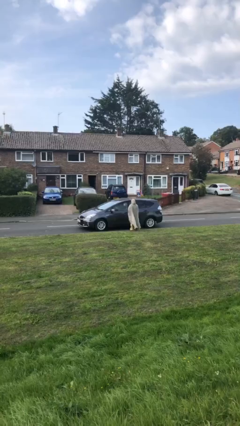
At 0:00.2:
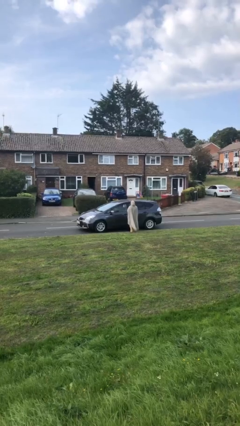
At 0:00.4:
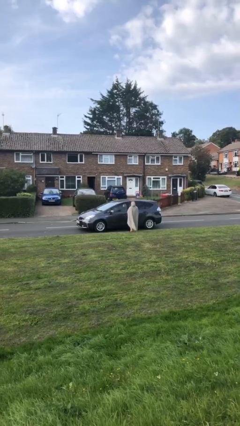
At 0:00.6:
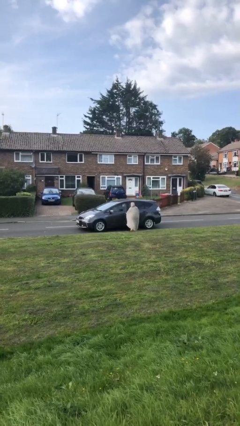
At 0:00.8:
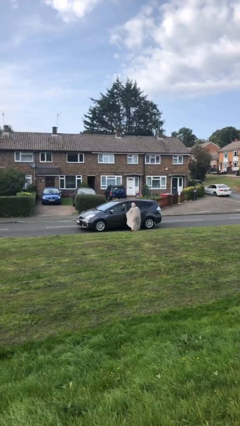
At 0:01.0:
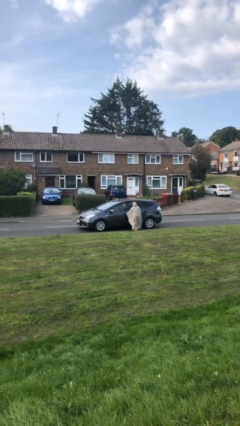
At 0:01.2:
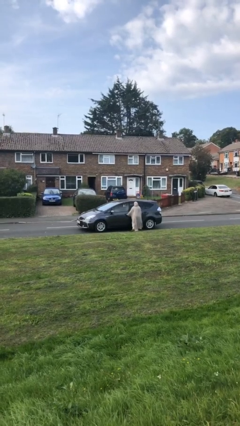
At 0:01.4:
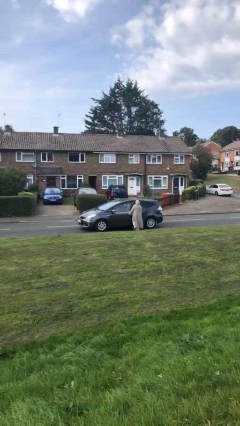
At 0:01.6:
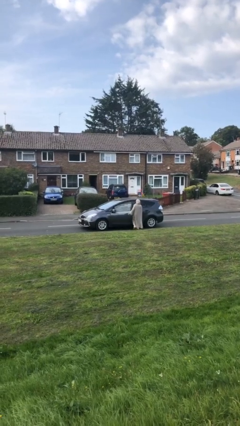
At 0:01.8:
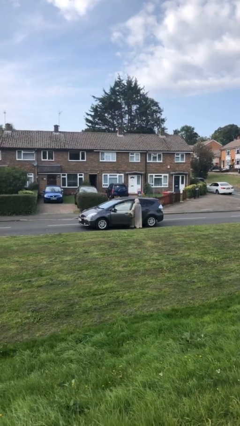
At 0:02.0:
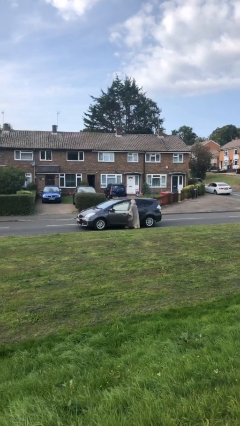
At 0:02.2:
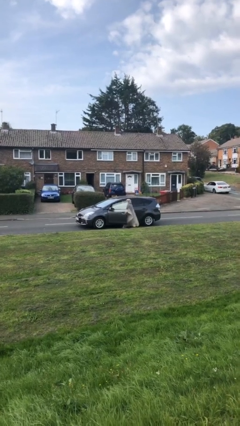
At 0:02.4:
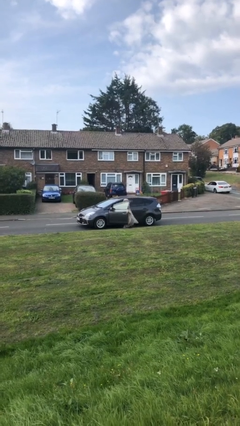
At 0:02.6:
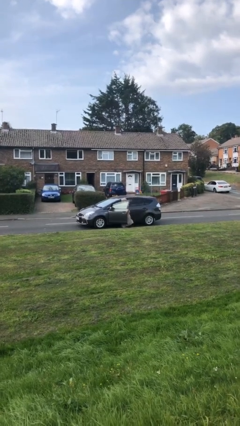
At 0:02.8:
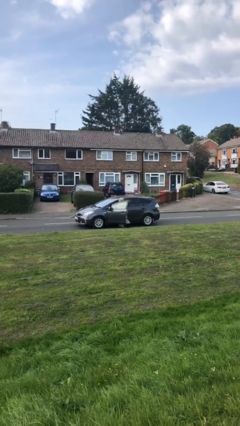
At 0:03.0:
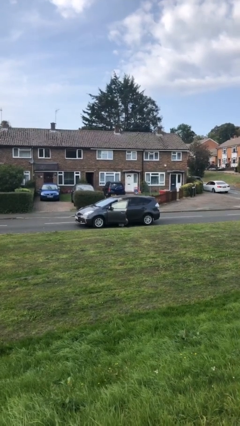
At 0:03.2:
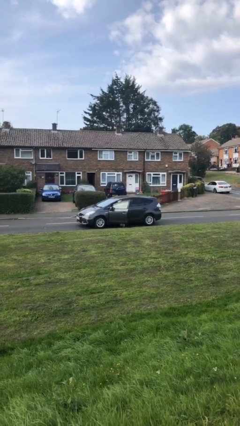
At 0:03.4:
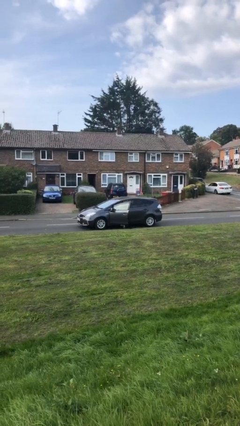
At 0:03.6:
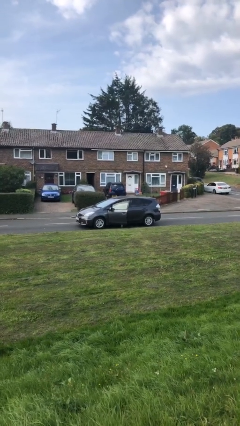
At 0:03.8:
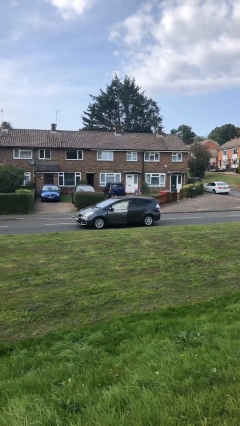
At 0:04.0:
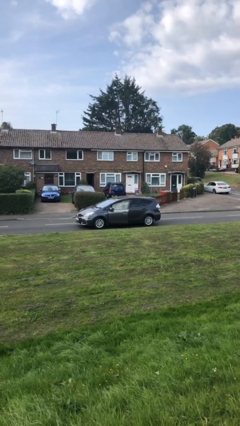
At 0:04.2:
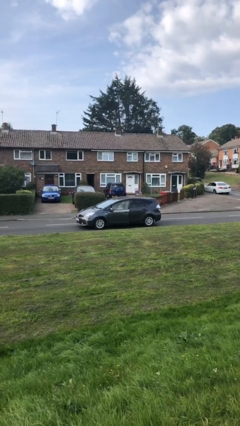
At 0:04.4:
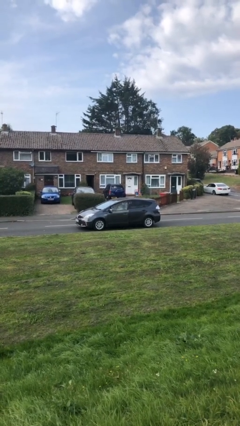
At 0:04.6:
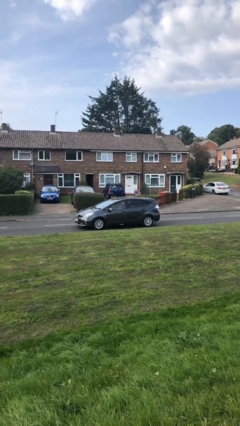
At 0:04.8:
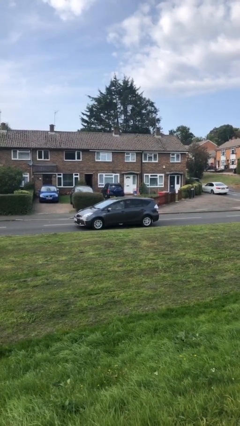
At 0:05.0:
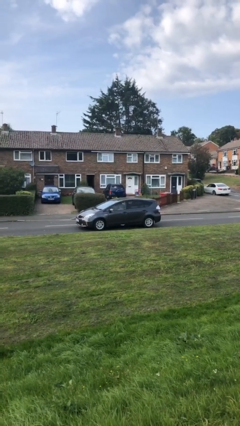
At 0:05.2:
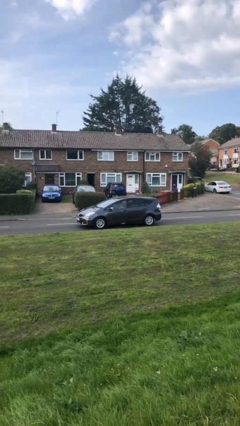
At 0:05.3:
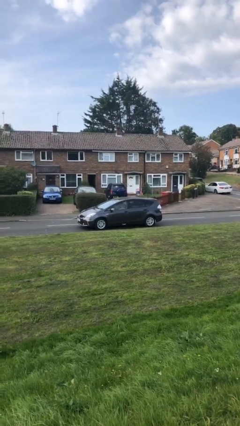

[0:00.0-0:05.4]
car picks up person

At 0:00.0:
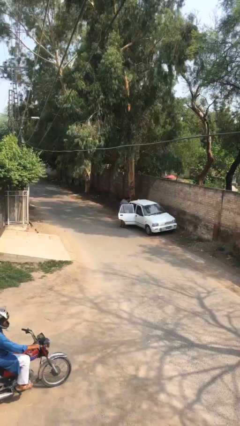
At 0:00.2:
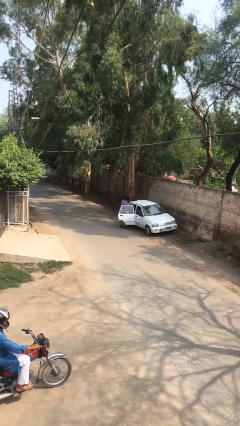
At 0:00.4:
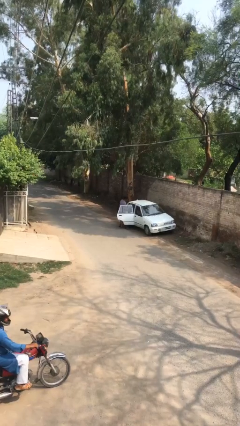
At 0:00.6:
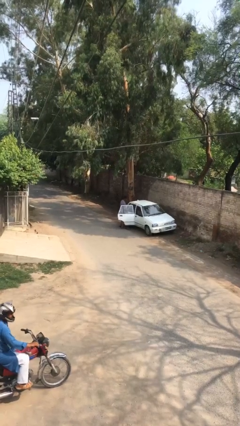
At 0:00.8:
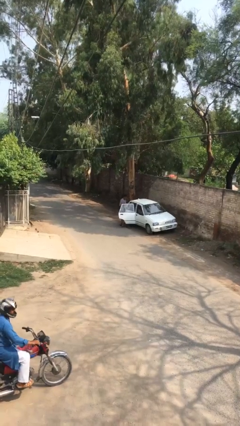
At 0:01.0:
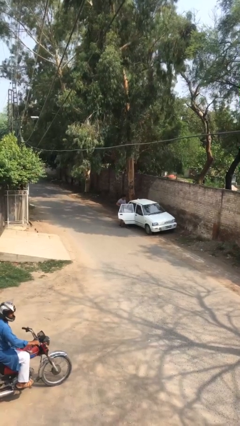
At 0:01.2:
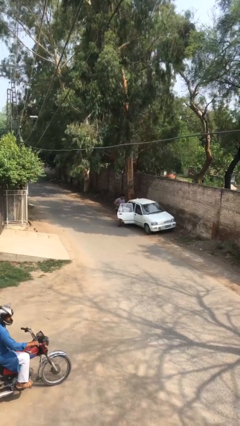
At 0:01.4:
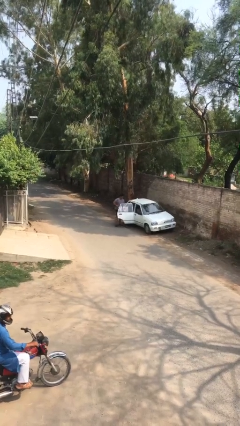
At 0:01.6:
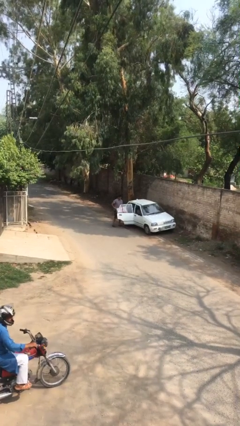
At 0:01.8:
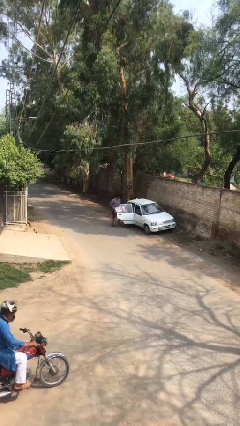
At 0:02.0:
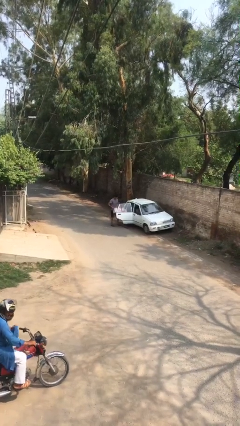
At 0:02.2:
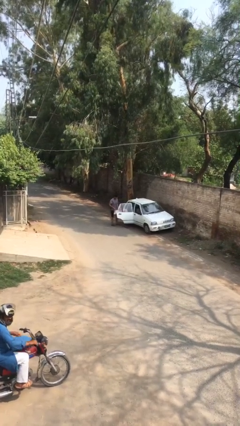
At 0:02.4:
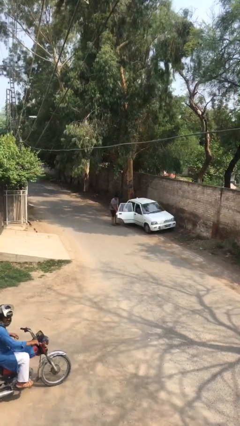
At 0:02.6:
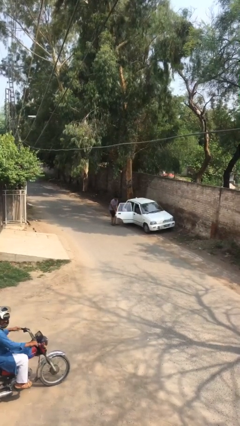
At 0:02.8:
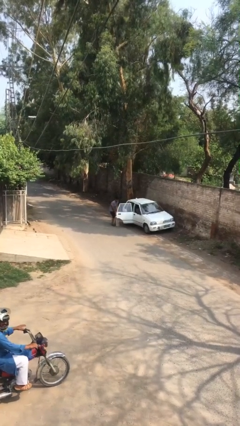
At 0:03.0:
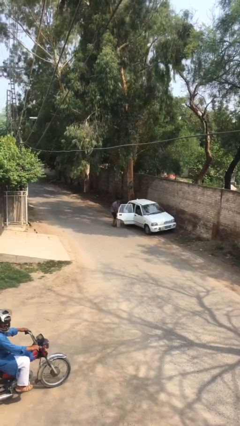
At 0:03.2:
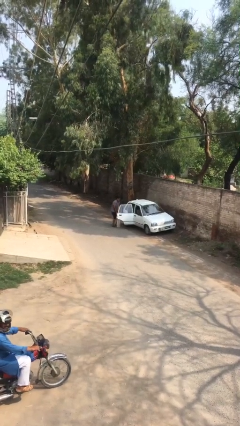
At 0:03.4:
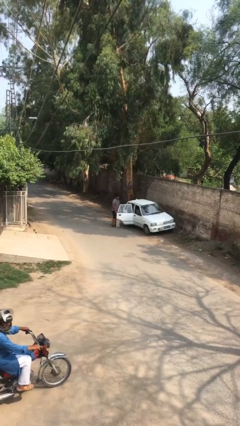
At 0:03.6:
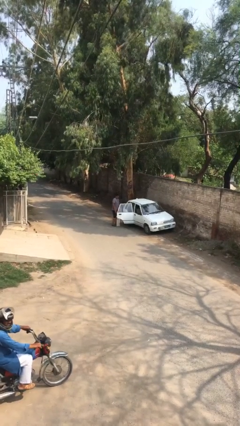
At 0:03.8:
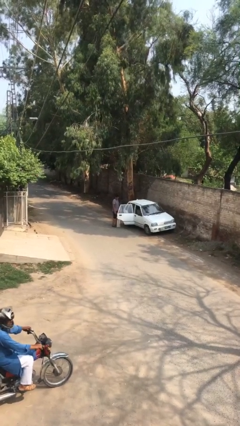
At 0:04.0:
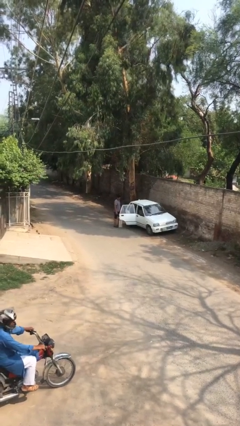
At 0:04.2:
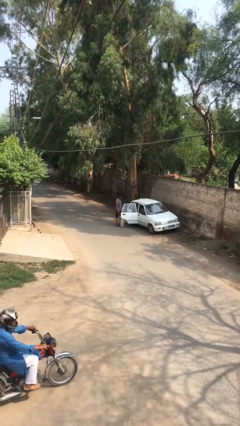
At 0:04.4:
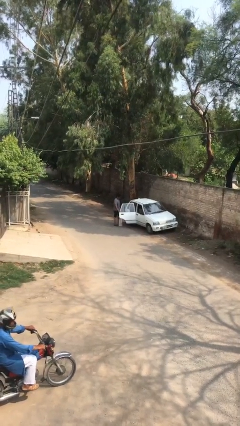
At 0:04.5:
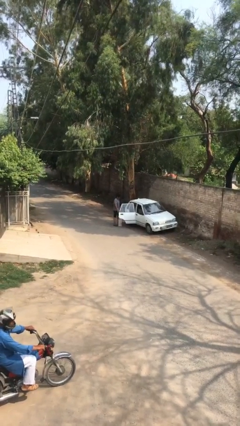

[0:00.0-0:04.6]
person unloads car

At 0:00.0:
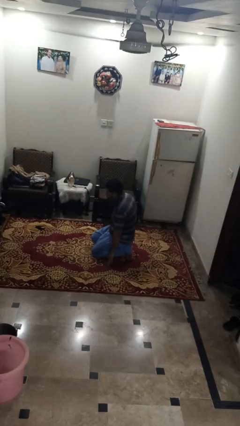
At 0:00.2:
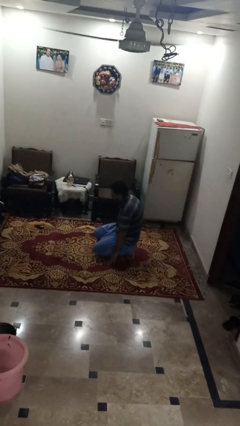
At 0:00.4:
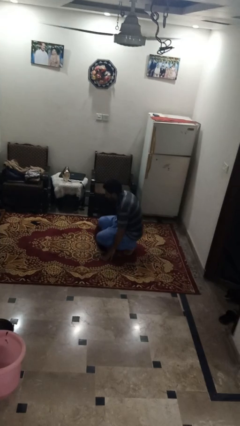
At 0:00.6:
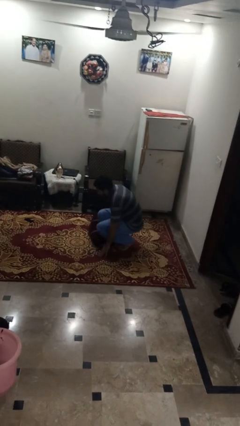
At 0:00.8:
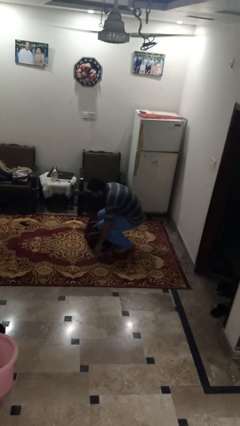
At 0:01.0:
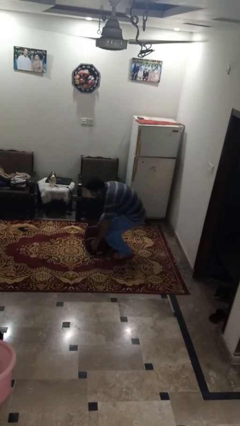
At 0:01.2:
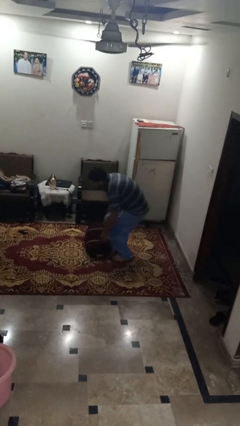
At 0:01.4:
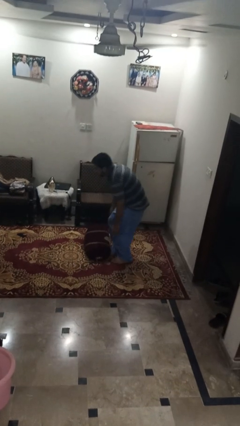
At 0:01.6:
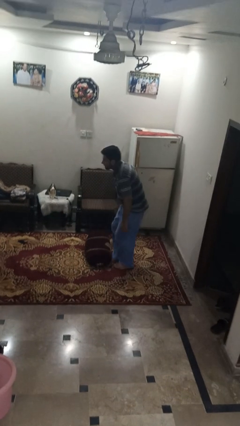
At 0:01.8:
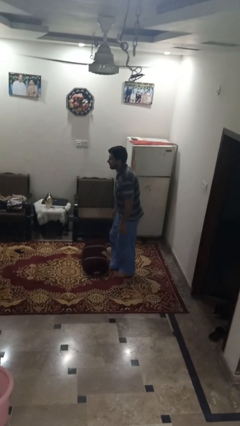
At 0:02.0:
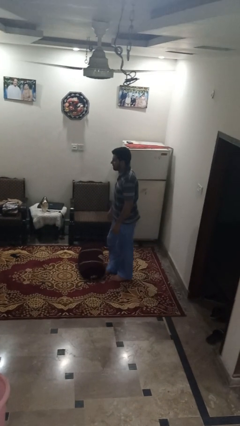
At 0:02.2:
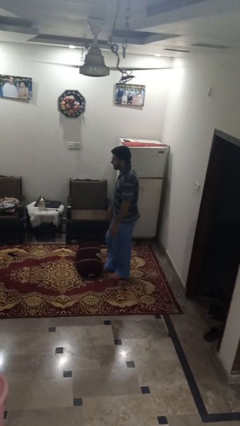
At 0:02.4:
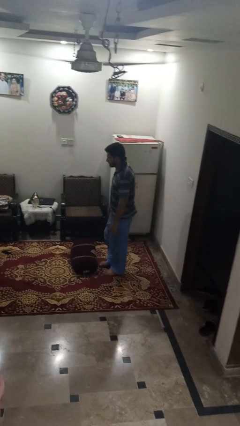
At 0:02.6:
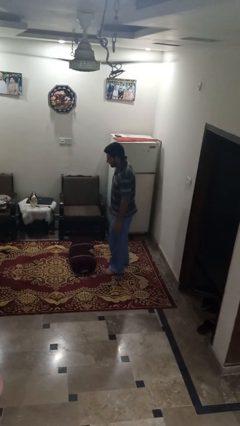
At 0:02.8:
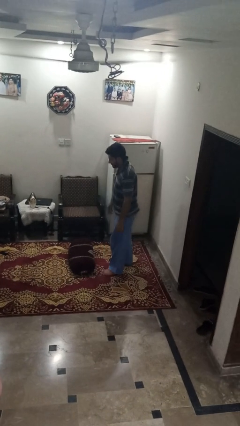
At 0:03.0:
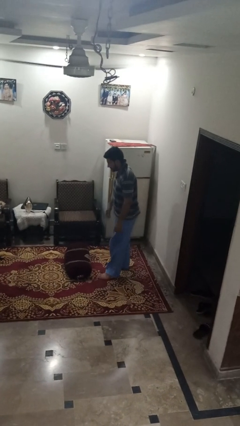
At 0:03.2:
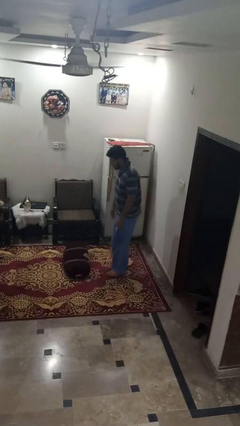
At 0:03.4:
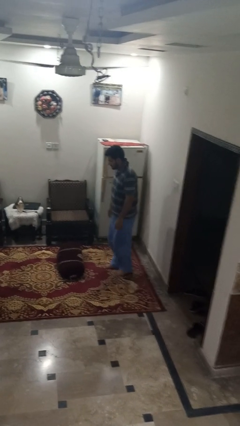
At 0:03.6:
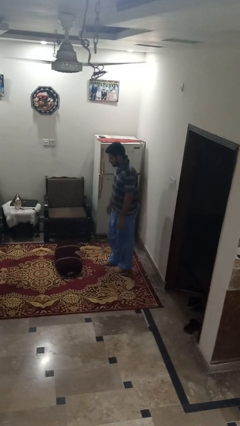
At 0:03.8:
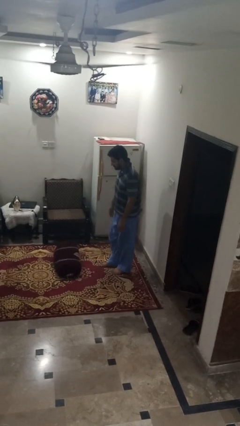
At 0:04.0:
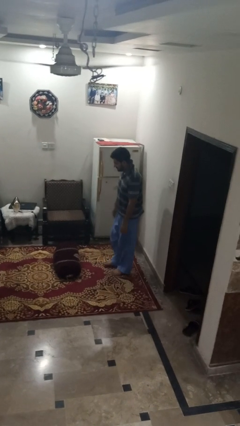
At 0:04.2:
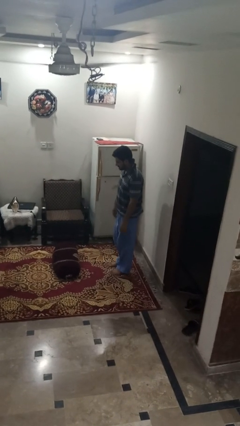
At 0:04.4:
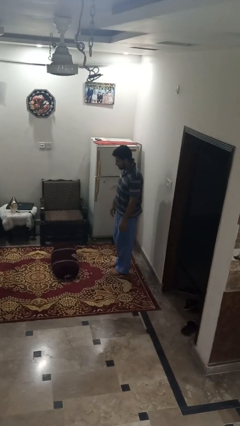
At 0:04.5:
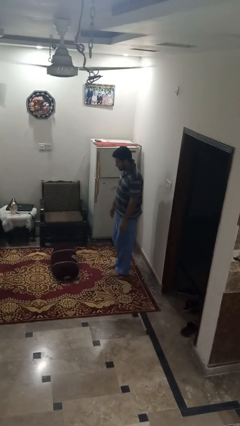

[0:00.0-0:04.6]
person stands up from floor

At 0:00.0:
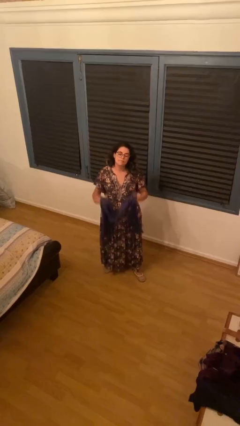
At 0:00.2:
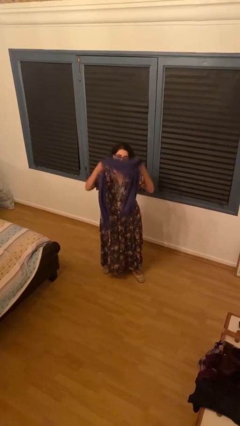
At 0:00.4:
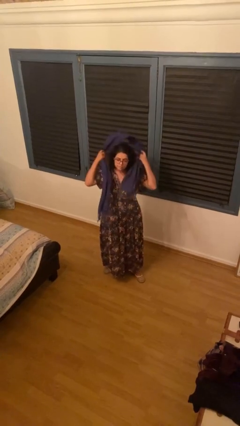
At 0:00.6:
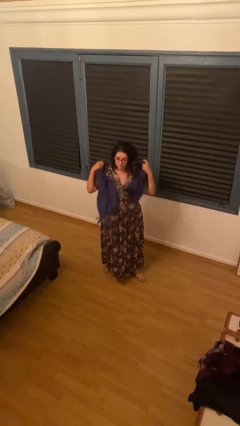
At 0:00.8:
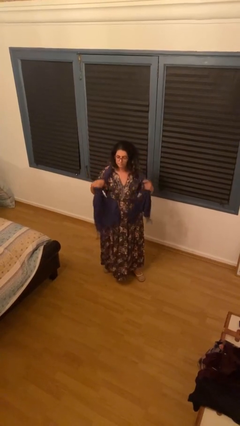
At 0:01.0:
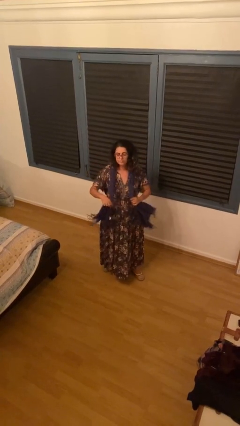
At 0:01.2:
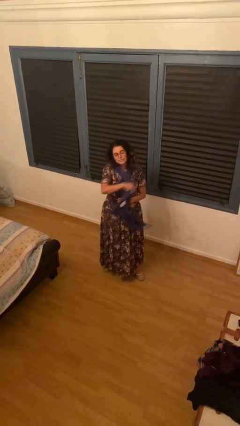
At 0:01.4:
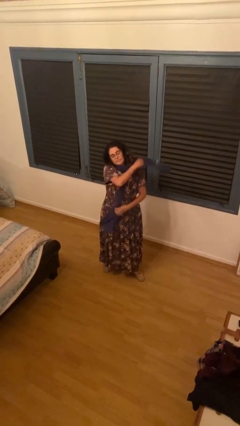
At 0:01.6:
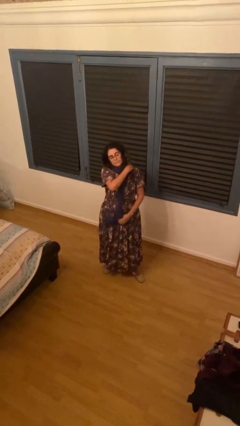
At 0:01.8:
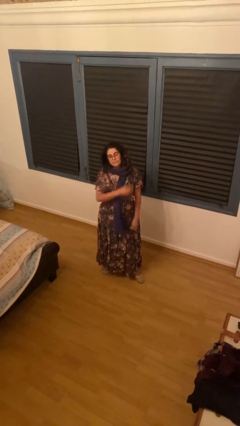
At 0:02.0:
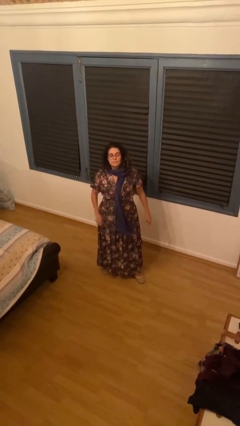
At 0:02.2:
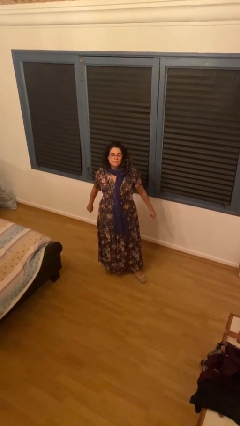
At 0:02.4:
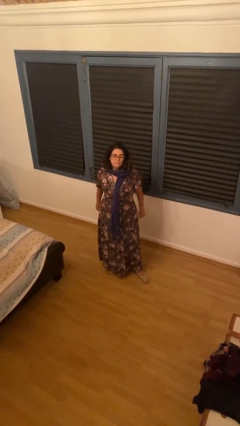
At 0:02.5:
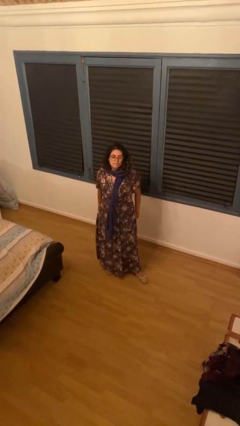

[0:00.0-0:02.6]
person puts on scarf

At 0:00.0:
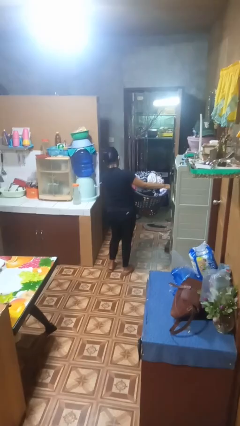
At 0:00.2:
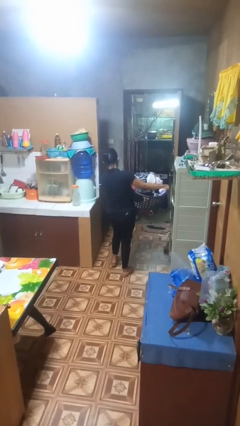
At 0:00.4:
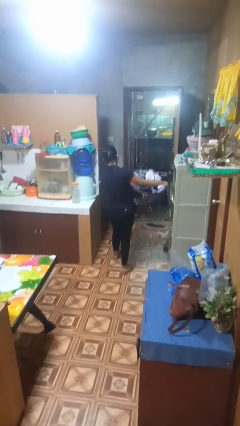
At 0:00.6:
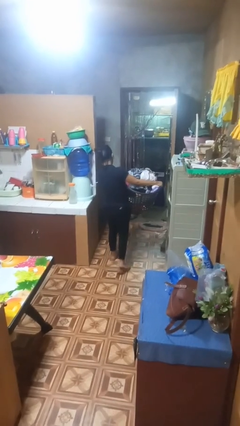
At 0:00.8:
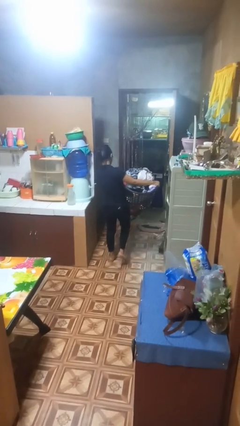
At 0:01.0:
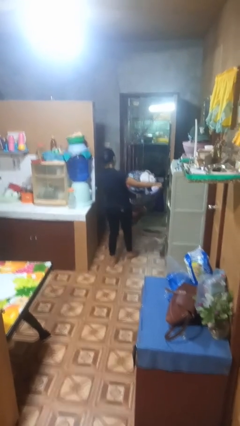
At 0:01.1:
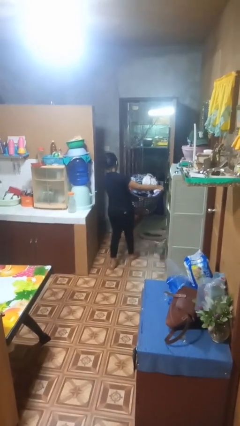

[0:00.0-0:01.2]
person carries laundry basket
